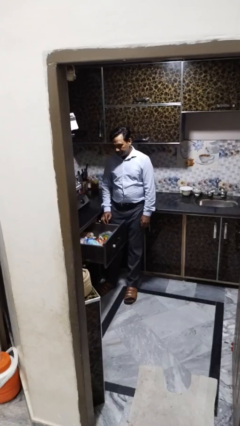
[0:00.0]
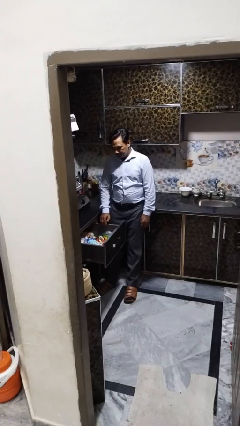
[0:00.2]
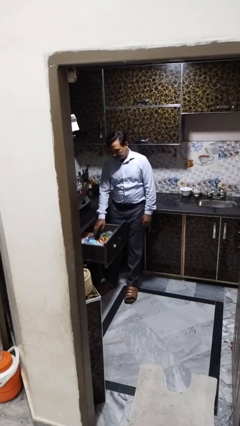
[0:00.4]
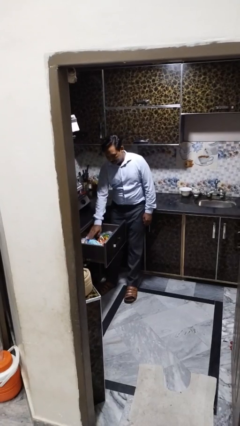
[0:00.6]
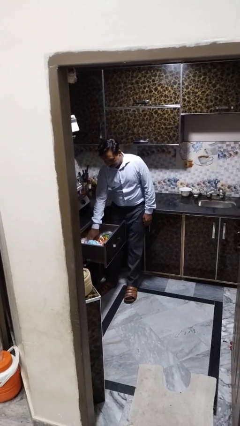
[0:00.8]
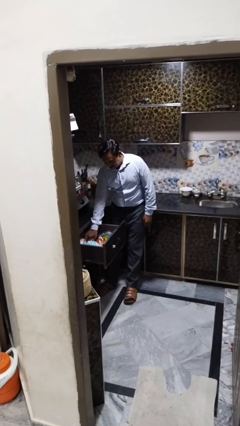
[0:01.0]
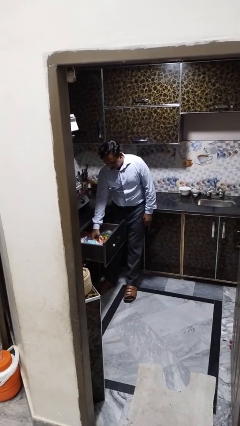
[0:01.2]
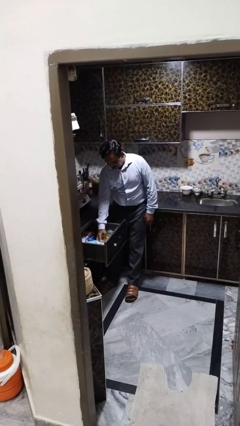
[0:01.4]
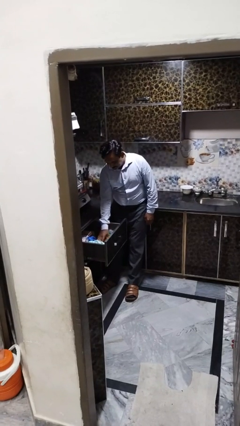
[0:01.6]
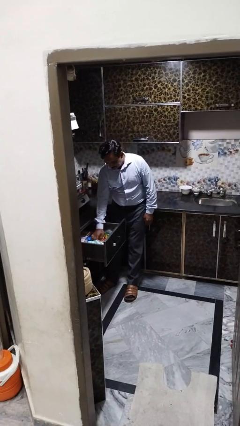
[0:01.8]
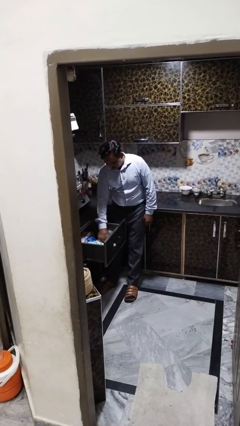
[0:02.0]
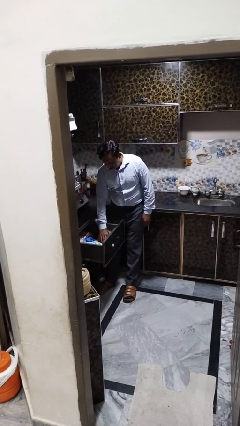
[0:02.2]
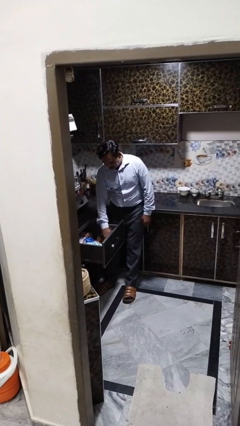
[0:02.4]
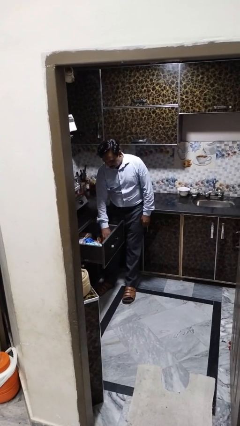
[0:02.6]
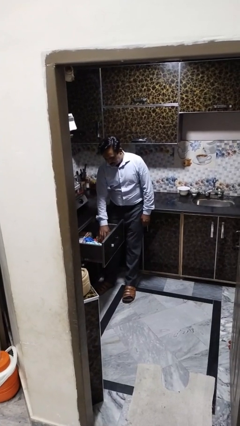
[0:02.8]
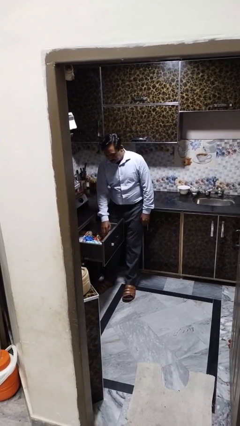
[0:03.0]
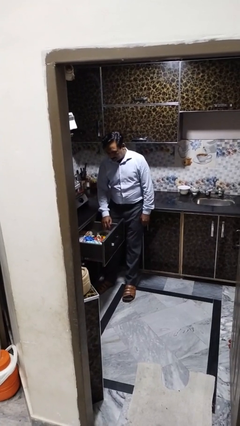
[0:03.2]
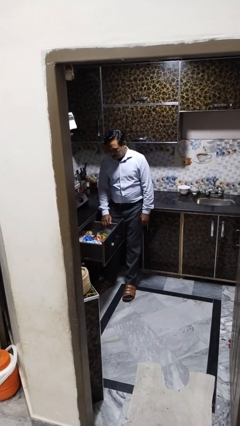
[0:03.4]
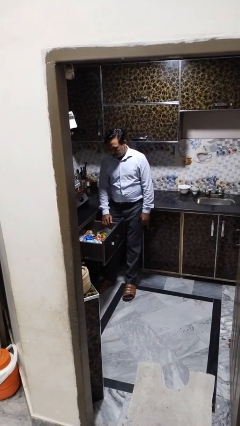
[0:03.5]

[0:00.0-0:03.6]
person searches in kitchen drawer

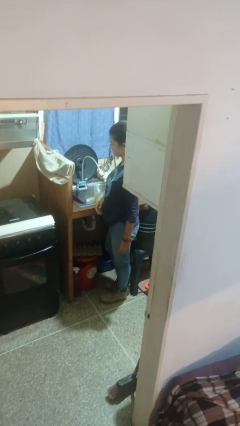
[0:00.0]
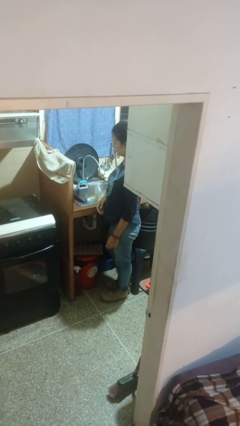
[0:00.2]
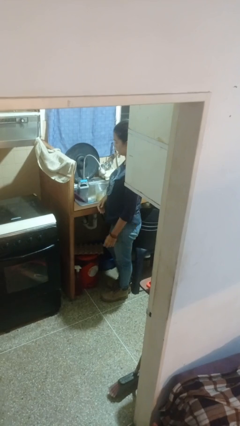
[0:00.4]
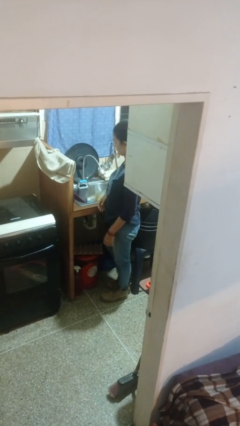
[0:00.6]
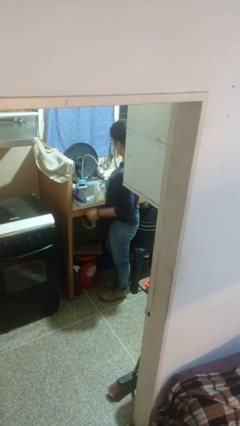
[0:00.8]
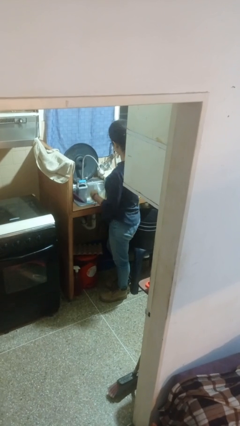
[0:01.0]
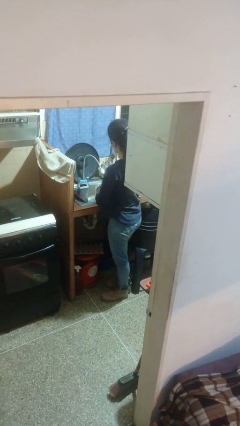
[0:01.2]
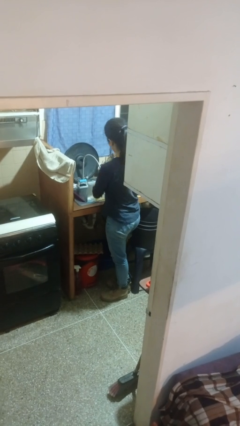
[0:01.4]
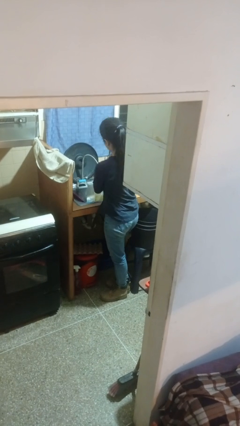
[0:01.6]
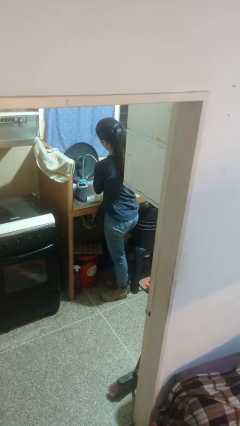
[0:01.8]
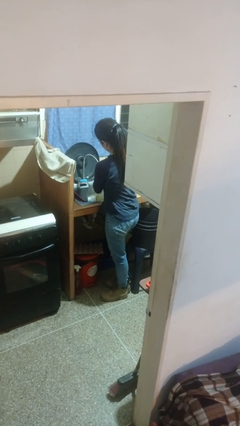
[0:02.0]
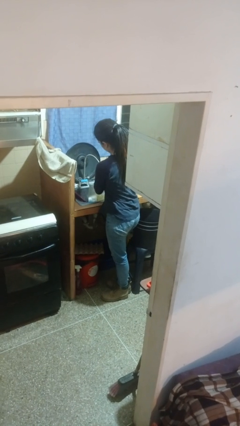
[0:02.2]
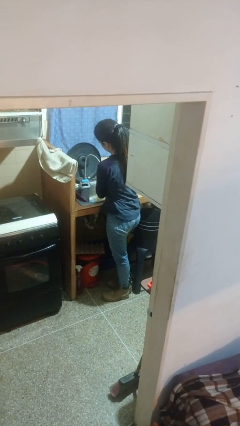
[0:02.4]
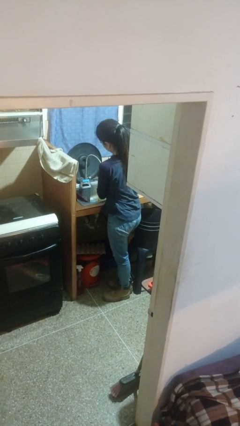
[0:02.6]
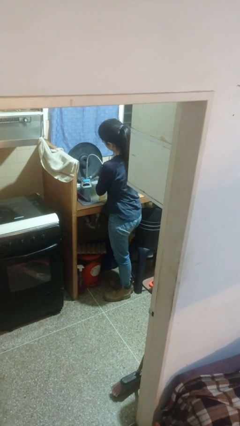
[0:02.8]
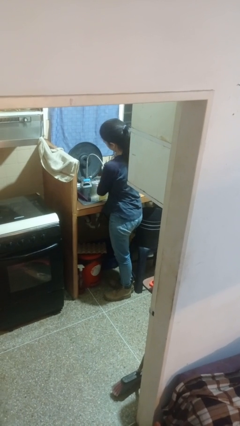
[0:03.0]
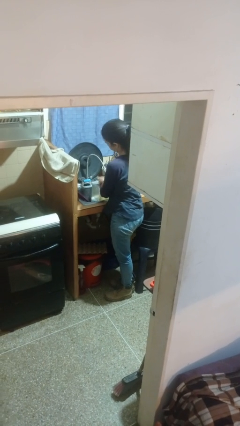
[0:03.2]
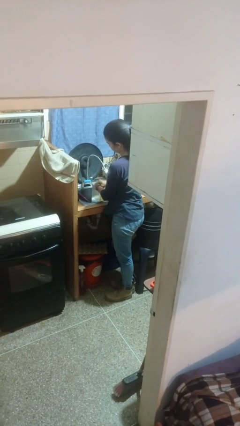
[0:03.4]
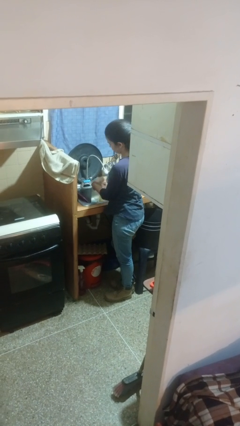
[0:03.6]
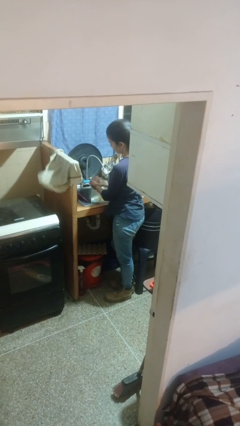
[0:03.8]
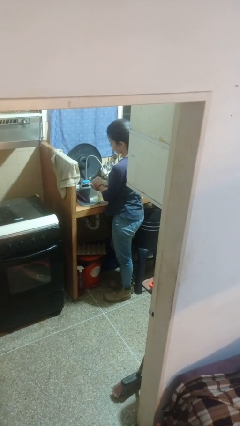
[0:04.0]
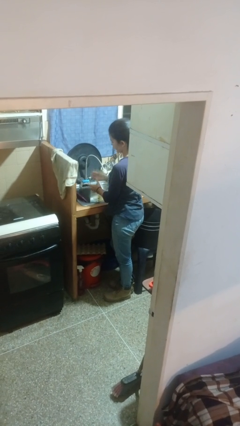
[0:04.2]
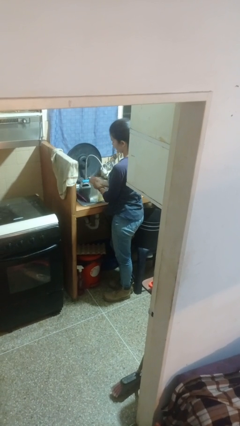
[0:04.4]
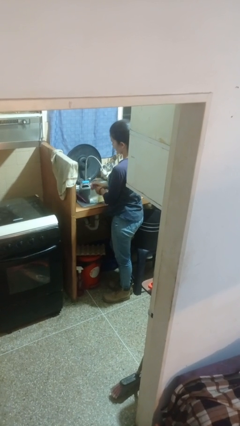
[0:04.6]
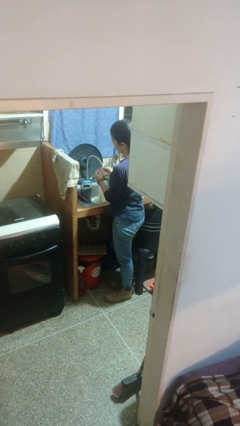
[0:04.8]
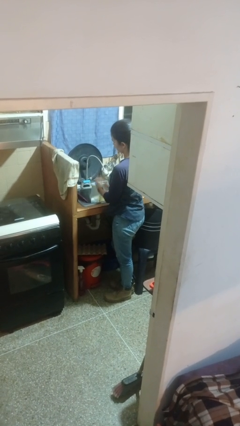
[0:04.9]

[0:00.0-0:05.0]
person washes hands

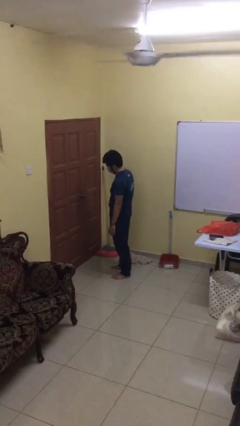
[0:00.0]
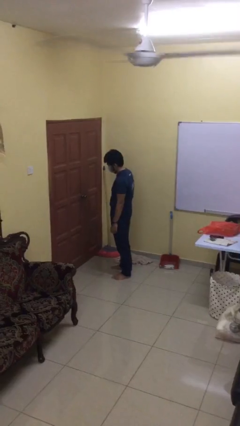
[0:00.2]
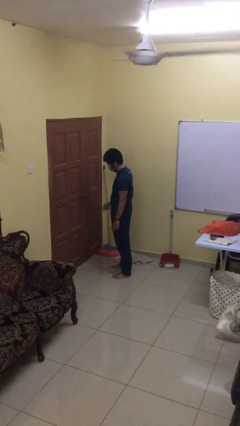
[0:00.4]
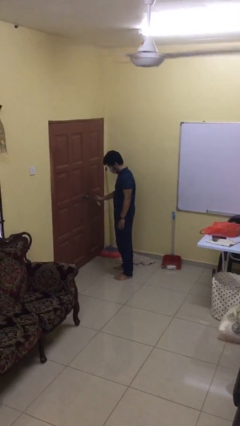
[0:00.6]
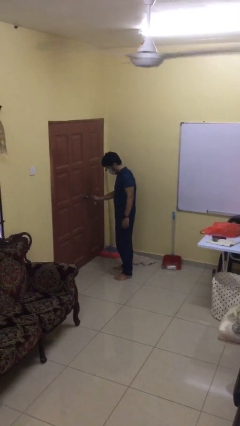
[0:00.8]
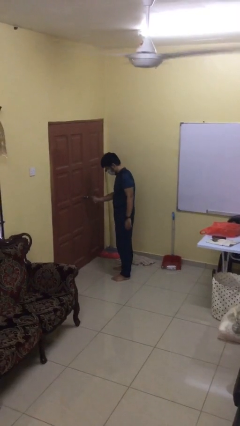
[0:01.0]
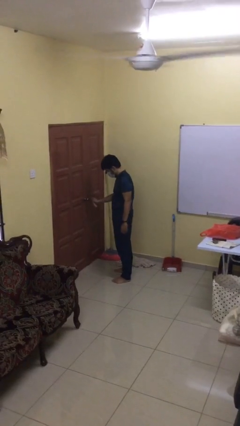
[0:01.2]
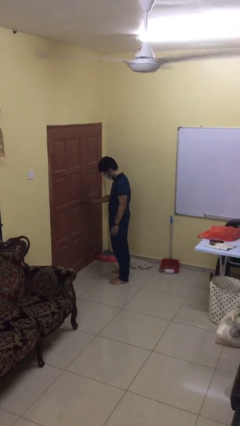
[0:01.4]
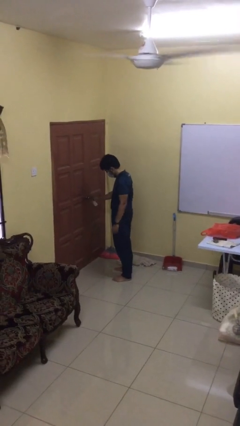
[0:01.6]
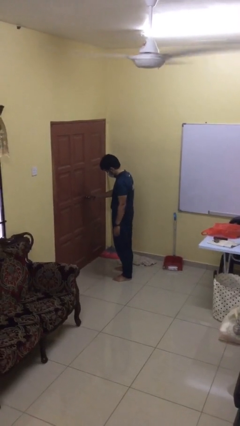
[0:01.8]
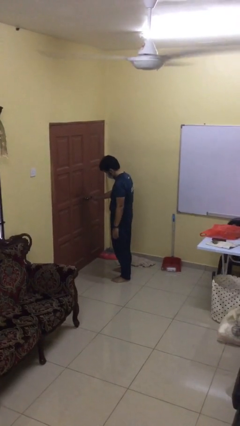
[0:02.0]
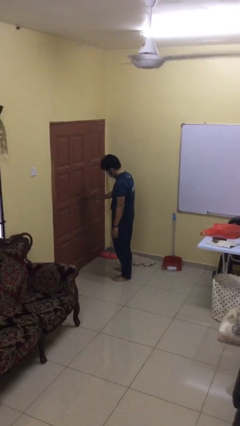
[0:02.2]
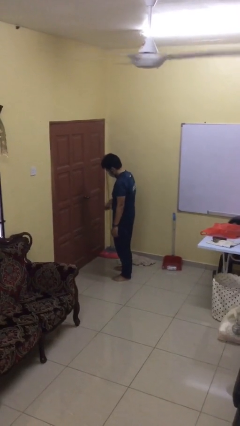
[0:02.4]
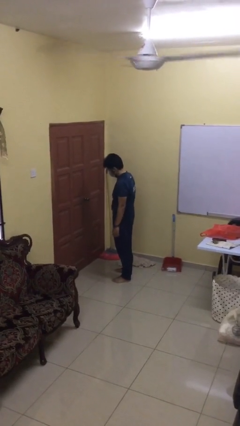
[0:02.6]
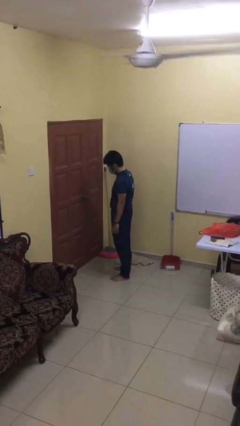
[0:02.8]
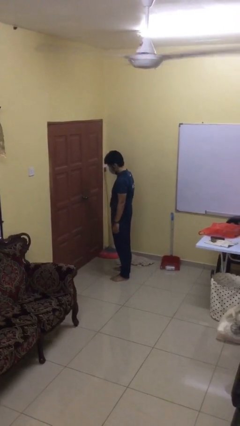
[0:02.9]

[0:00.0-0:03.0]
person unlocks door with keys

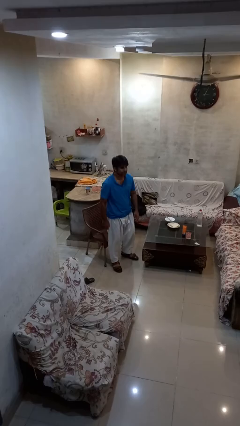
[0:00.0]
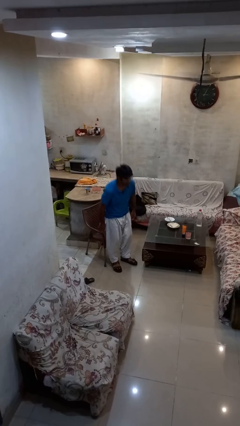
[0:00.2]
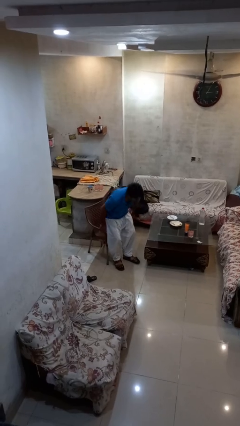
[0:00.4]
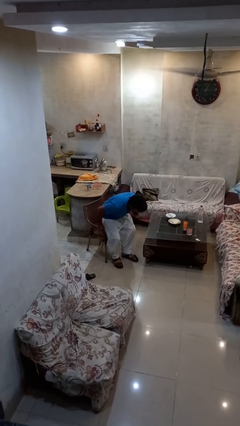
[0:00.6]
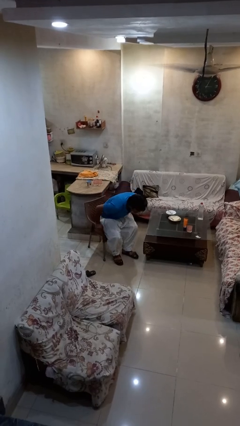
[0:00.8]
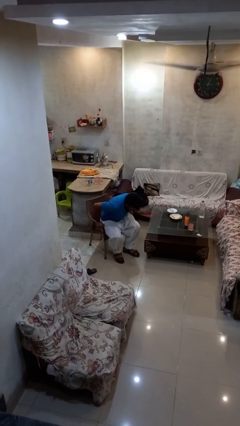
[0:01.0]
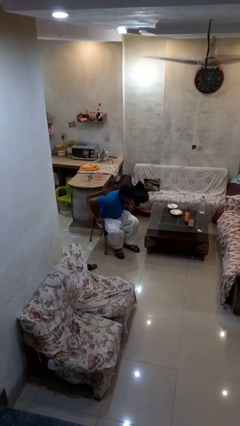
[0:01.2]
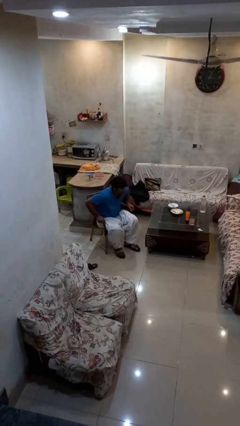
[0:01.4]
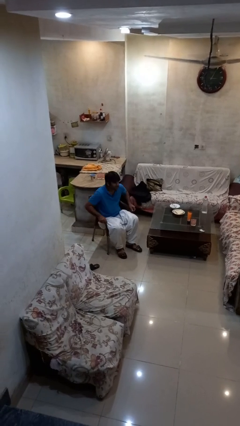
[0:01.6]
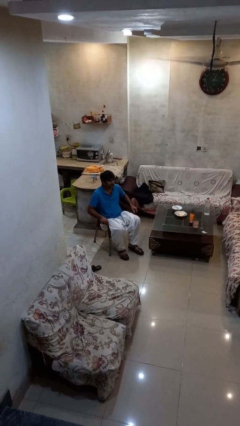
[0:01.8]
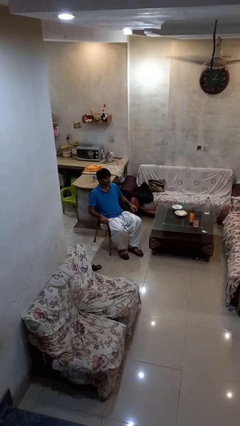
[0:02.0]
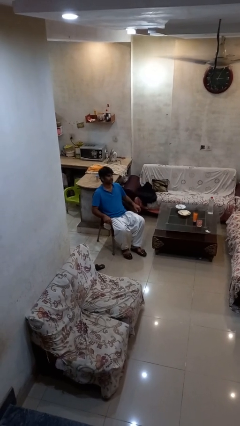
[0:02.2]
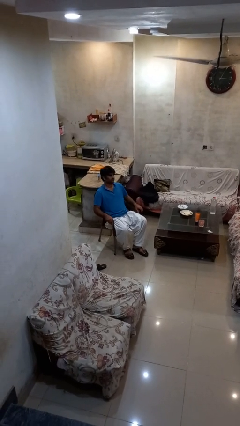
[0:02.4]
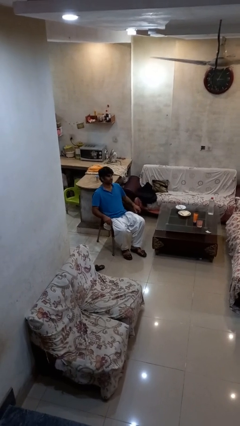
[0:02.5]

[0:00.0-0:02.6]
person sits down

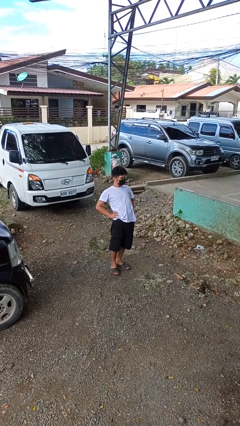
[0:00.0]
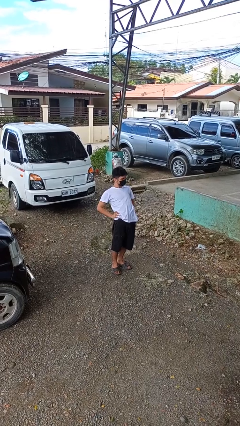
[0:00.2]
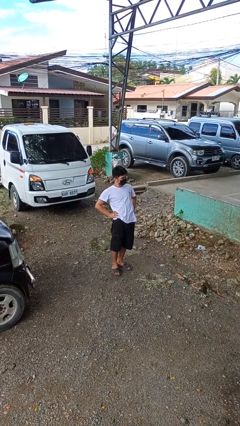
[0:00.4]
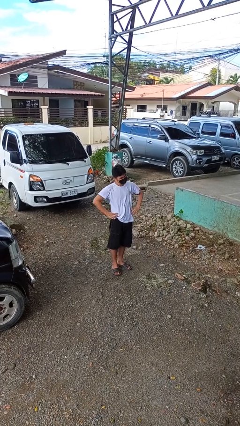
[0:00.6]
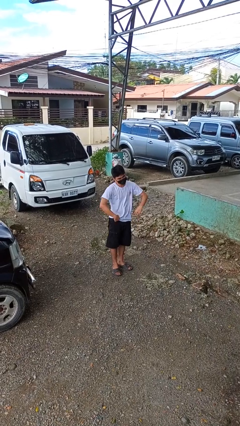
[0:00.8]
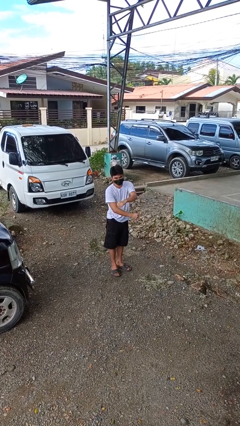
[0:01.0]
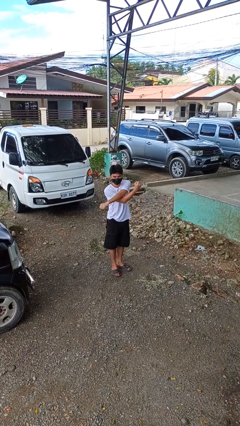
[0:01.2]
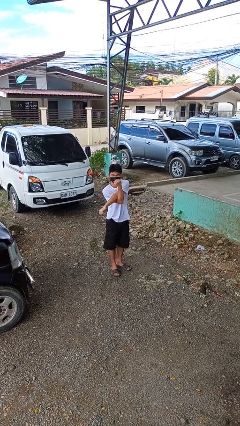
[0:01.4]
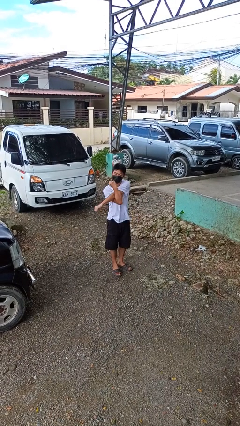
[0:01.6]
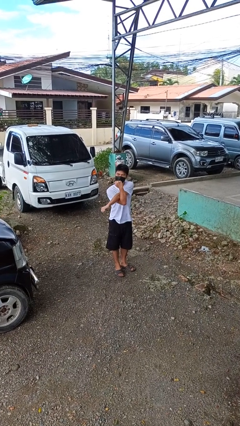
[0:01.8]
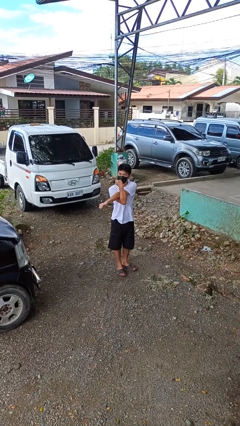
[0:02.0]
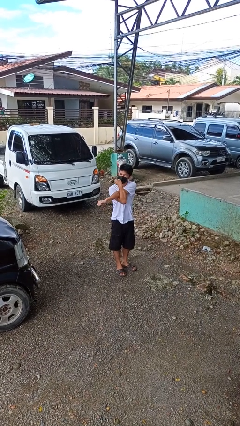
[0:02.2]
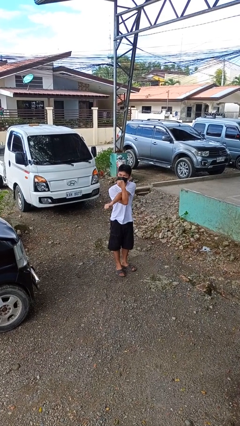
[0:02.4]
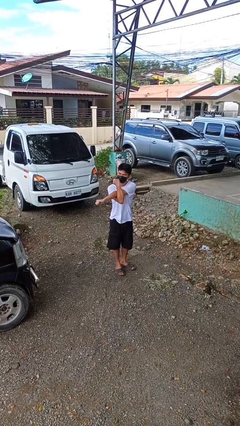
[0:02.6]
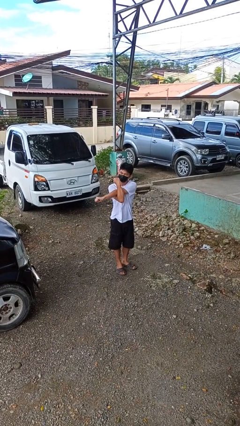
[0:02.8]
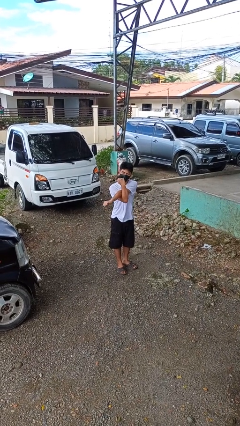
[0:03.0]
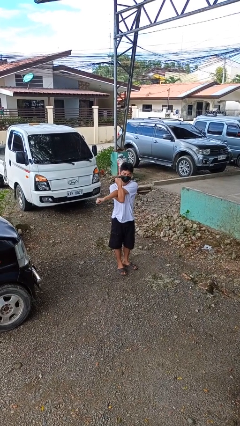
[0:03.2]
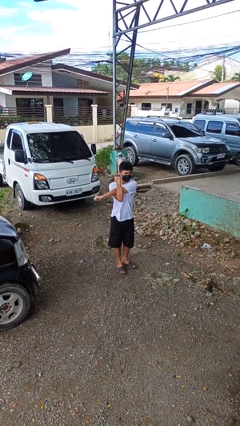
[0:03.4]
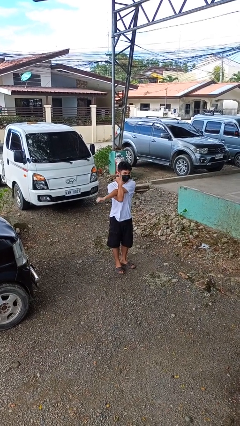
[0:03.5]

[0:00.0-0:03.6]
person stretches arms to side
